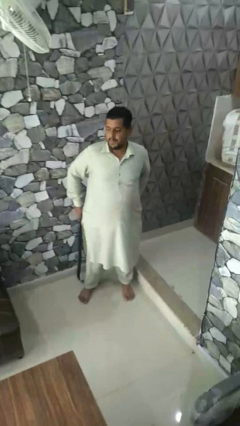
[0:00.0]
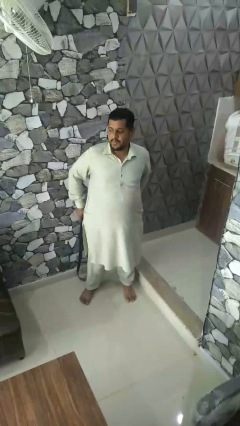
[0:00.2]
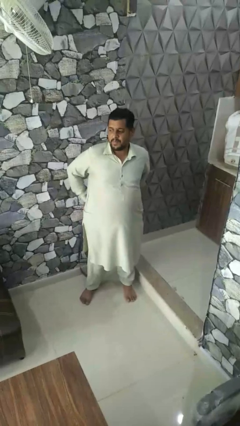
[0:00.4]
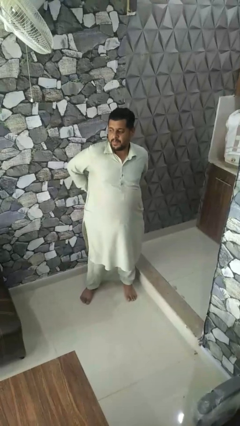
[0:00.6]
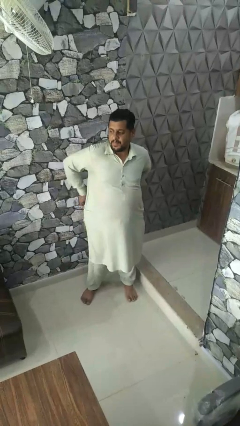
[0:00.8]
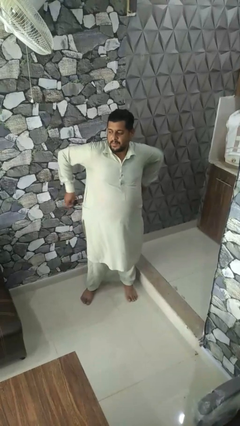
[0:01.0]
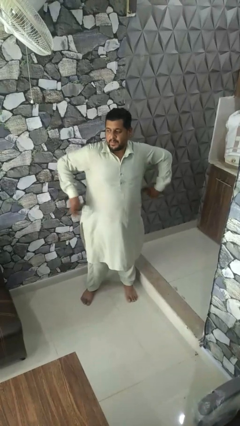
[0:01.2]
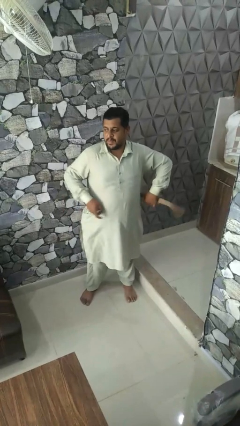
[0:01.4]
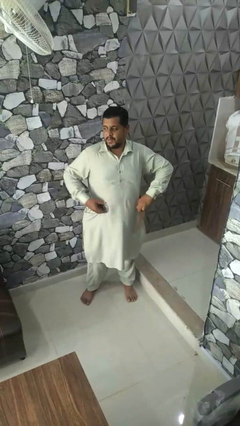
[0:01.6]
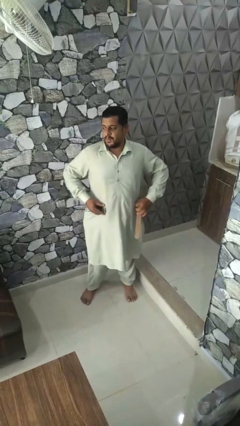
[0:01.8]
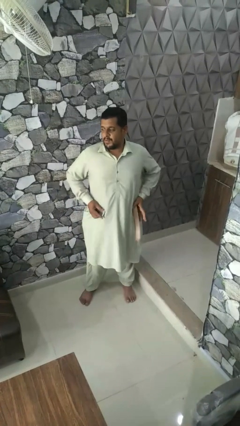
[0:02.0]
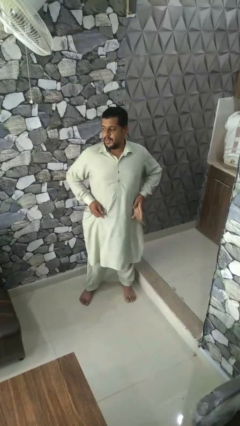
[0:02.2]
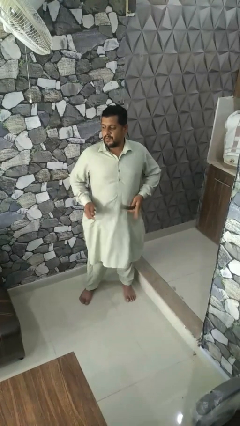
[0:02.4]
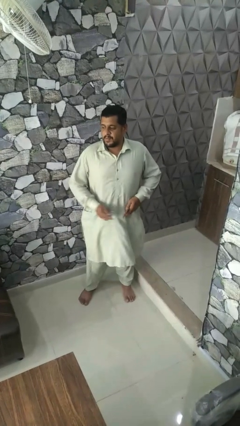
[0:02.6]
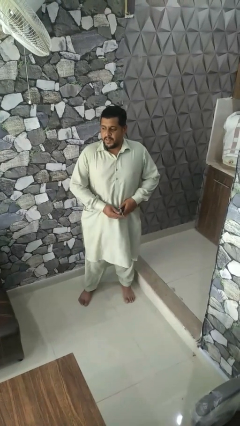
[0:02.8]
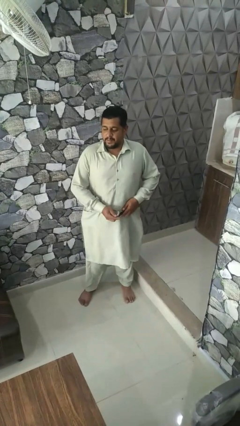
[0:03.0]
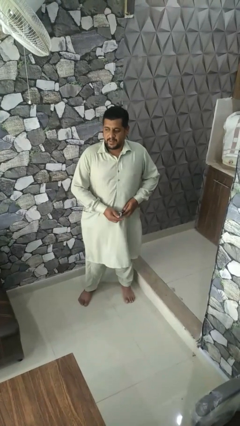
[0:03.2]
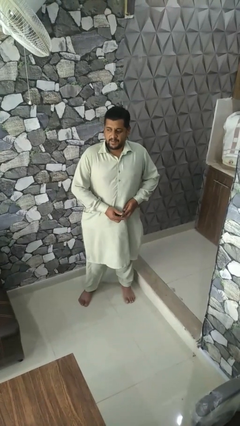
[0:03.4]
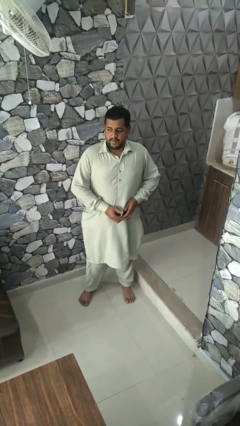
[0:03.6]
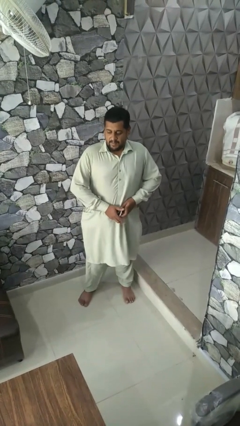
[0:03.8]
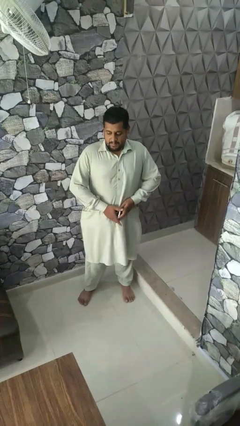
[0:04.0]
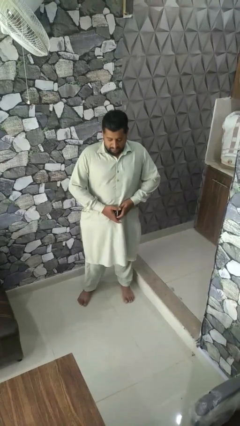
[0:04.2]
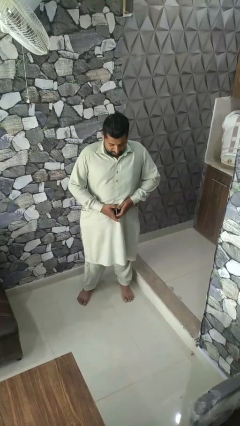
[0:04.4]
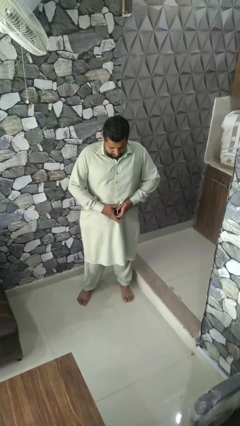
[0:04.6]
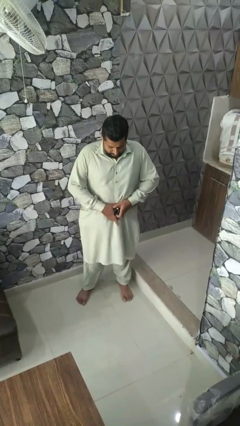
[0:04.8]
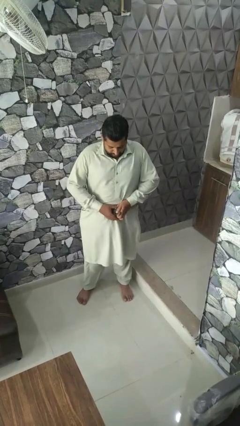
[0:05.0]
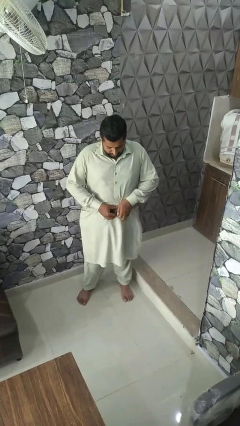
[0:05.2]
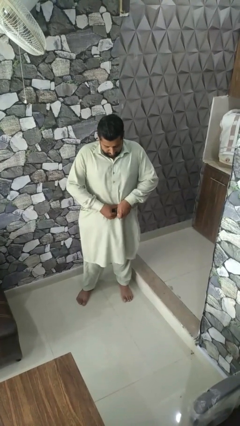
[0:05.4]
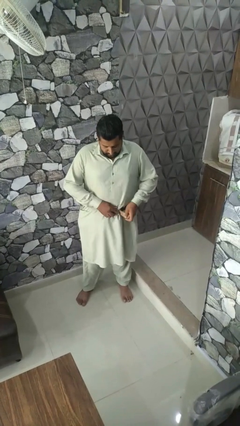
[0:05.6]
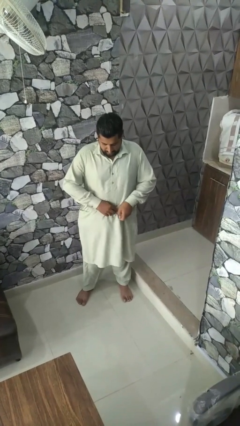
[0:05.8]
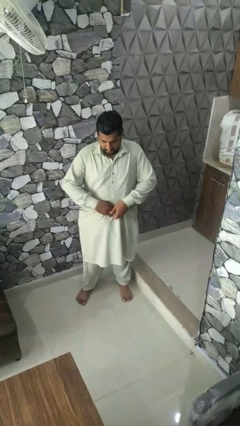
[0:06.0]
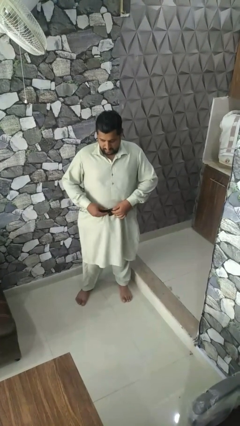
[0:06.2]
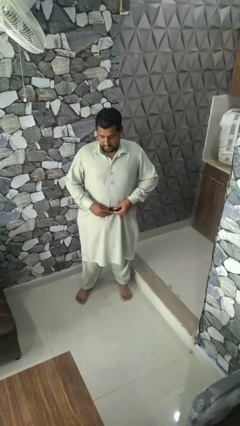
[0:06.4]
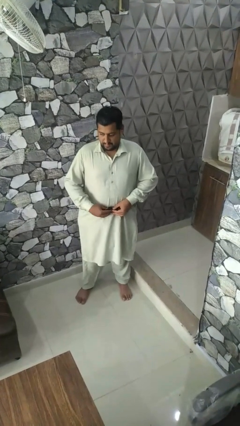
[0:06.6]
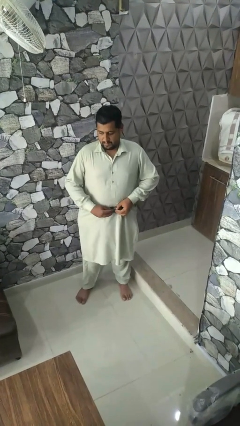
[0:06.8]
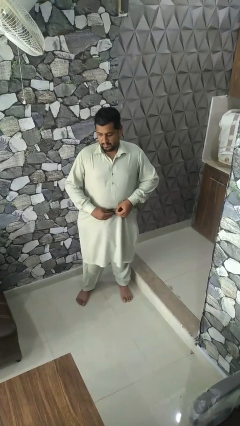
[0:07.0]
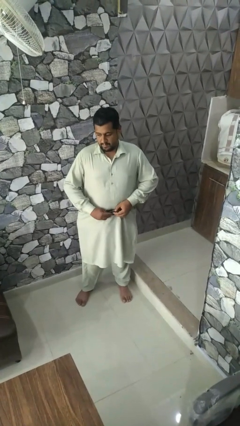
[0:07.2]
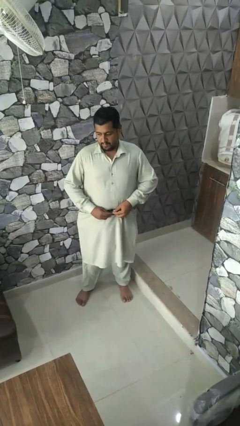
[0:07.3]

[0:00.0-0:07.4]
person puts on belt

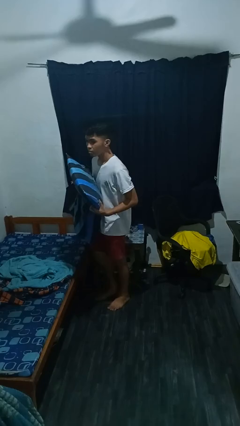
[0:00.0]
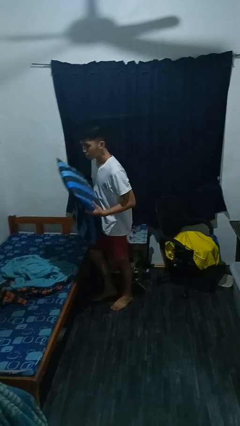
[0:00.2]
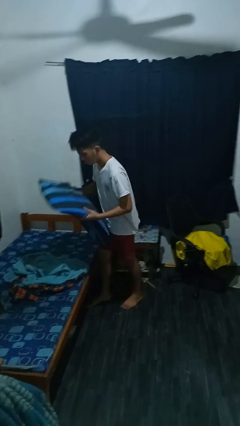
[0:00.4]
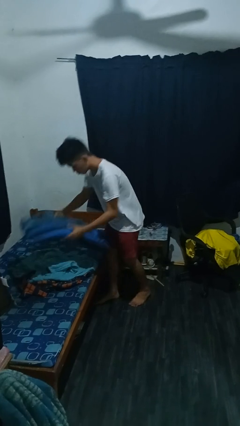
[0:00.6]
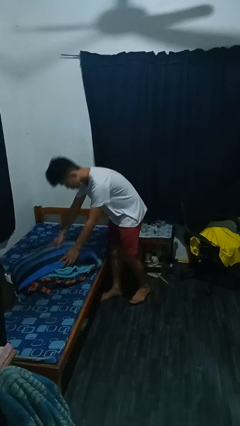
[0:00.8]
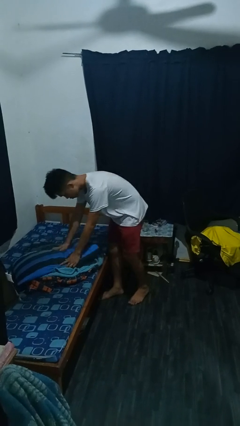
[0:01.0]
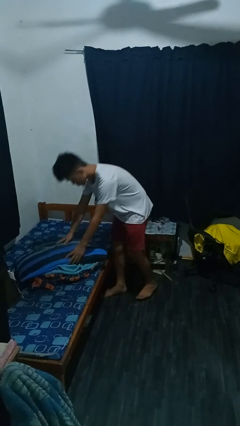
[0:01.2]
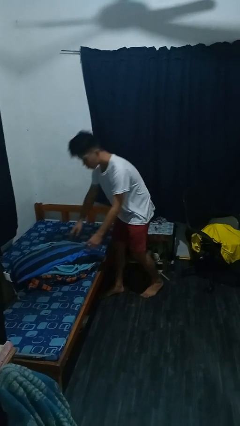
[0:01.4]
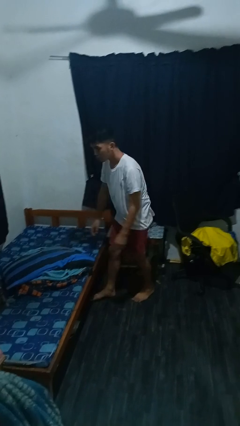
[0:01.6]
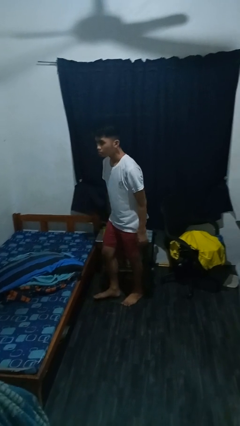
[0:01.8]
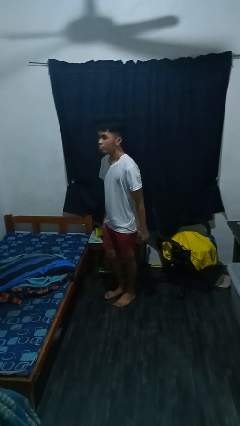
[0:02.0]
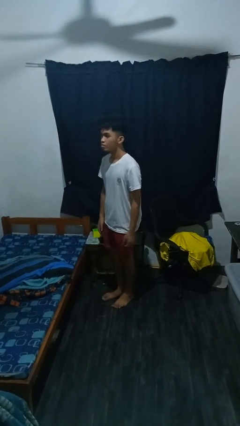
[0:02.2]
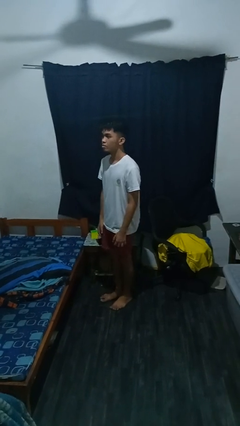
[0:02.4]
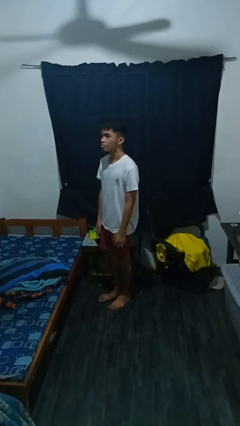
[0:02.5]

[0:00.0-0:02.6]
person puts down object on bed

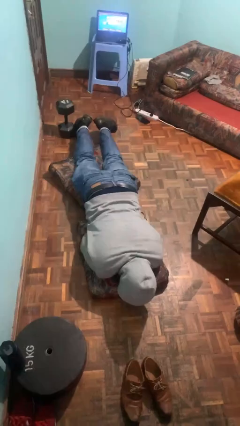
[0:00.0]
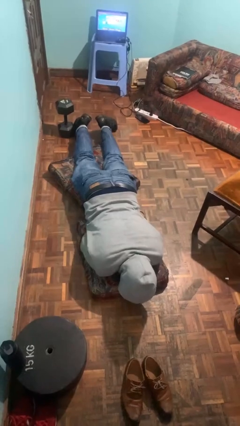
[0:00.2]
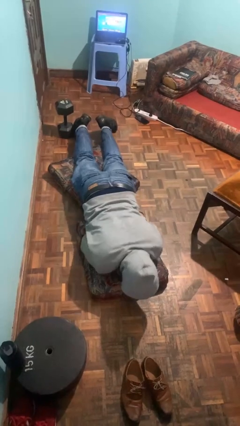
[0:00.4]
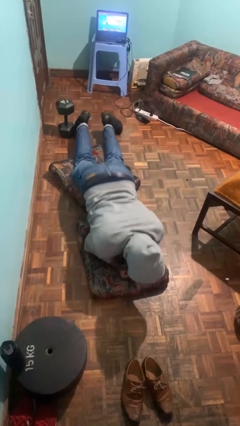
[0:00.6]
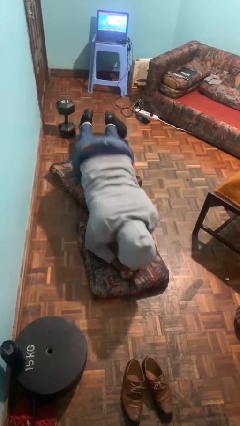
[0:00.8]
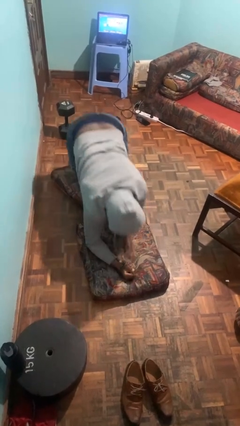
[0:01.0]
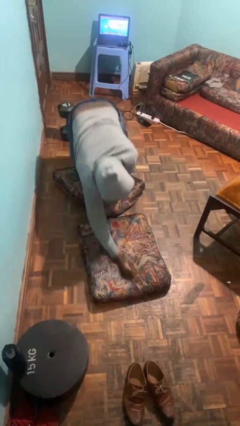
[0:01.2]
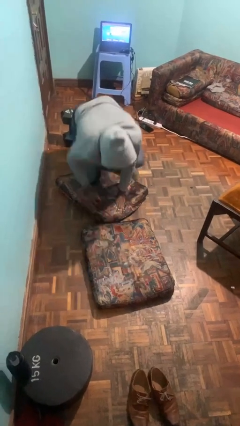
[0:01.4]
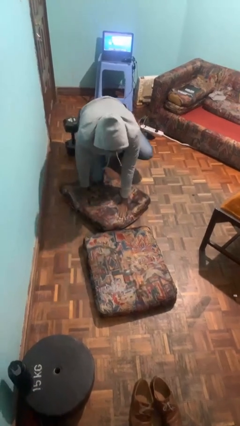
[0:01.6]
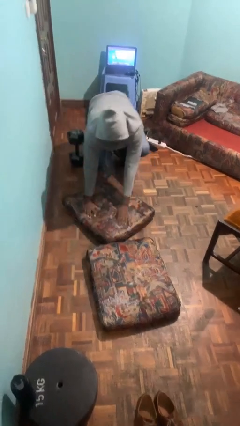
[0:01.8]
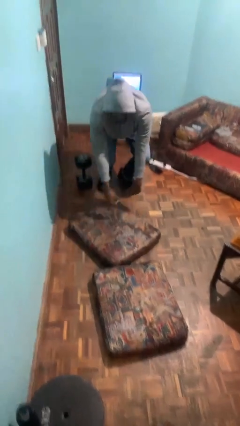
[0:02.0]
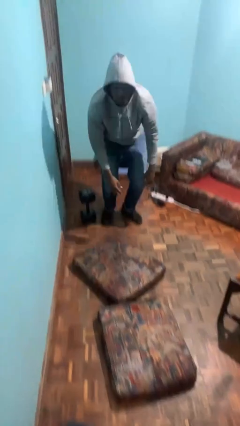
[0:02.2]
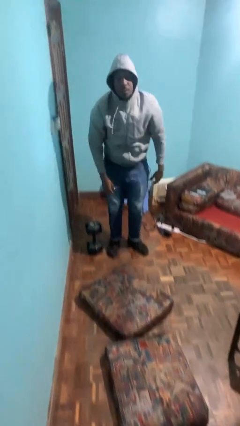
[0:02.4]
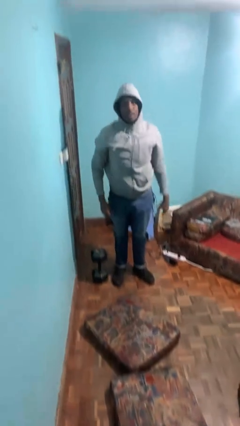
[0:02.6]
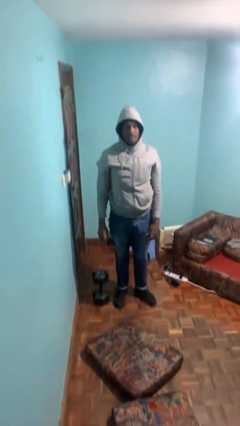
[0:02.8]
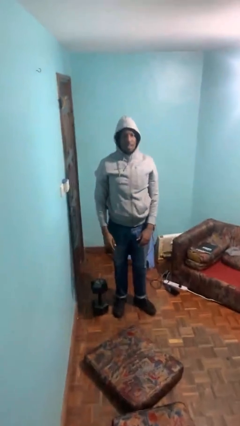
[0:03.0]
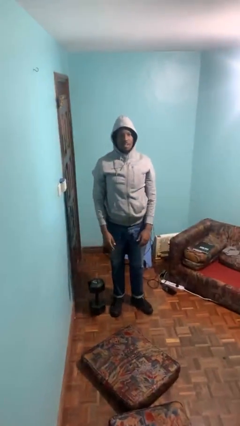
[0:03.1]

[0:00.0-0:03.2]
person stands up from floor

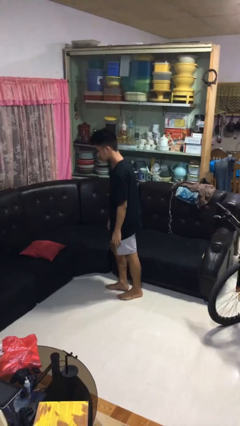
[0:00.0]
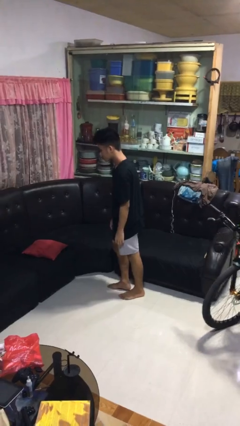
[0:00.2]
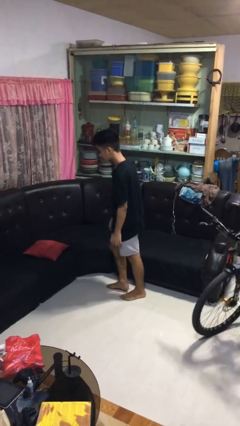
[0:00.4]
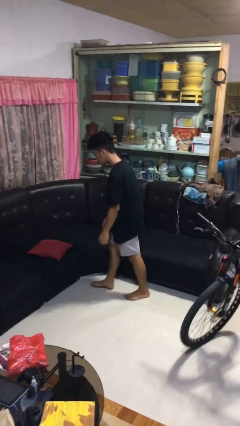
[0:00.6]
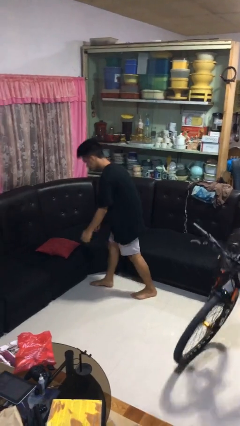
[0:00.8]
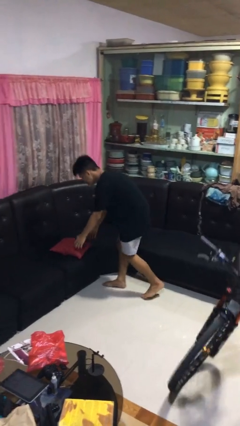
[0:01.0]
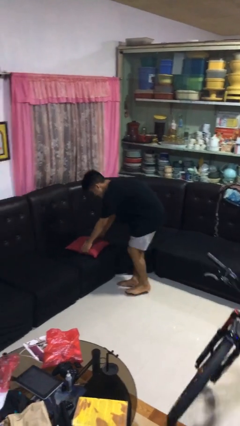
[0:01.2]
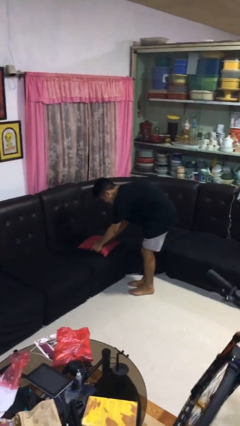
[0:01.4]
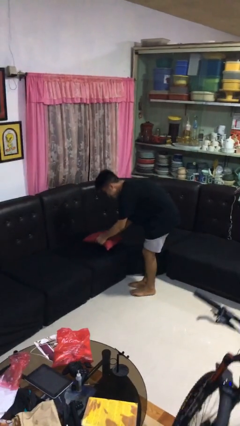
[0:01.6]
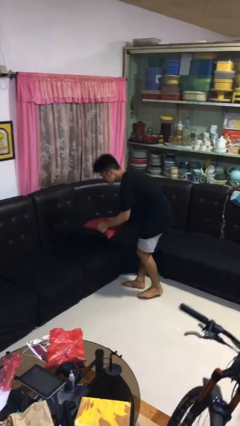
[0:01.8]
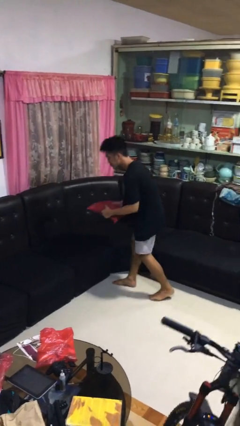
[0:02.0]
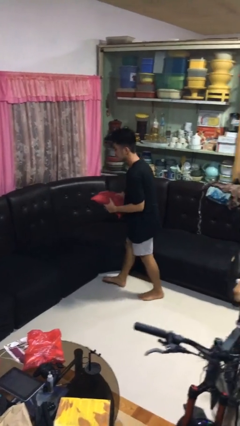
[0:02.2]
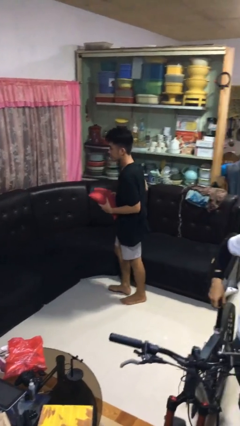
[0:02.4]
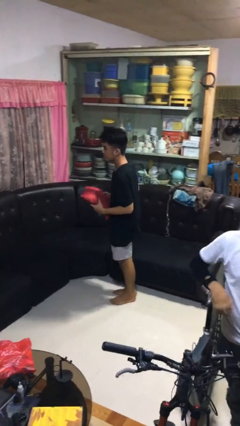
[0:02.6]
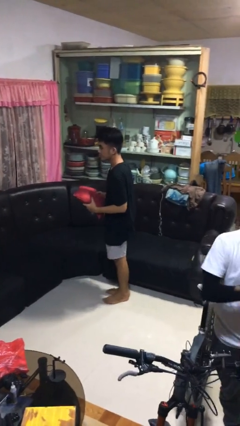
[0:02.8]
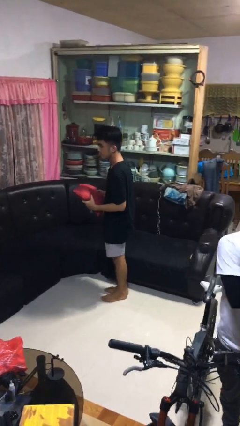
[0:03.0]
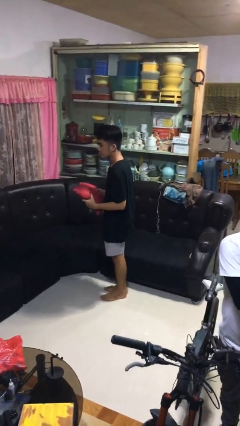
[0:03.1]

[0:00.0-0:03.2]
person picks up object from couch

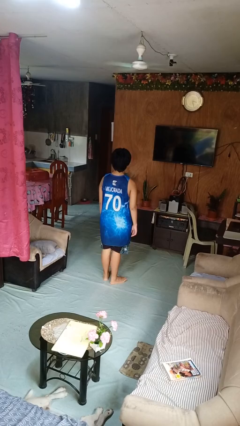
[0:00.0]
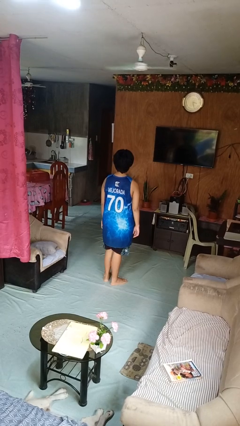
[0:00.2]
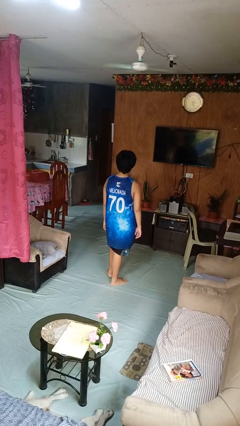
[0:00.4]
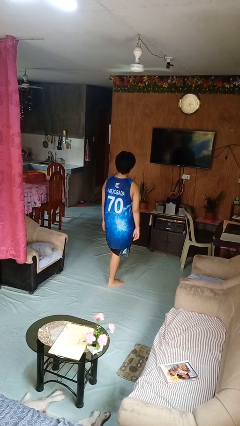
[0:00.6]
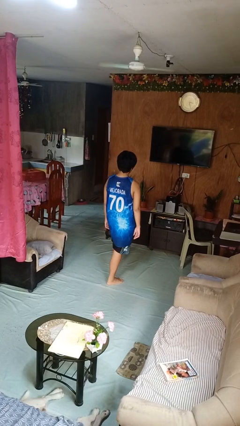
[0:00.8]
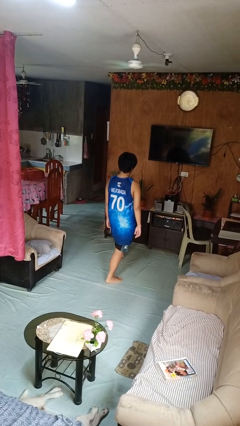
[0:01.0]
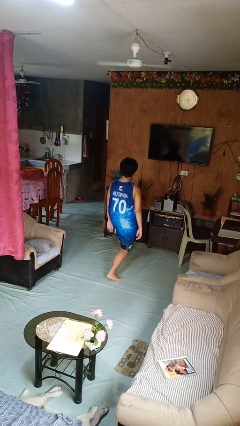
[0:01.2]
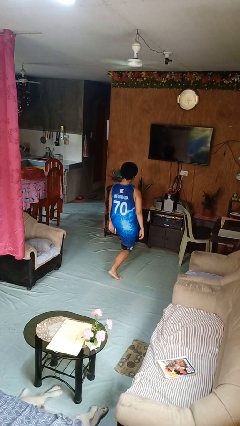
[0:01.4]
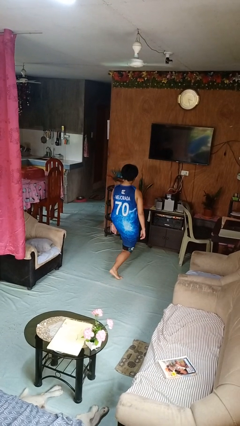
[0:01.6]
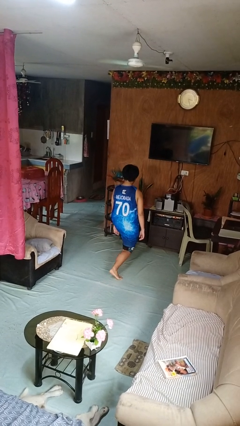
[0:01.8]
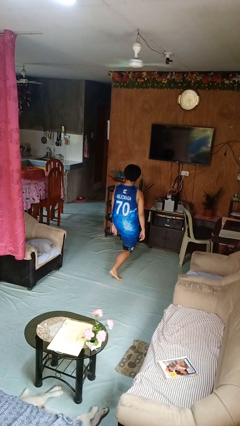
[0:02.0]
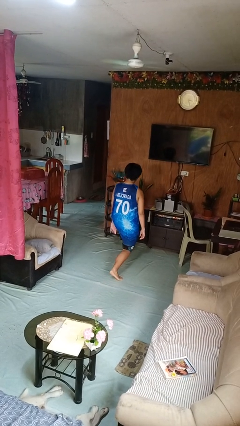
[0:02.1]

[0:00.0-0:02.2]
person exercises with lunges
